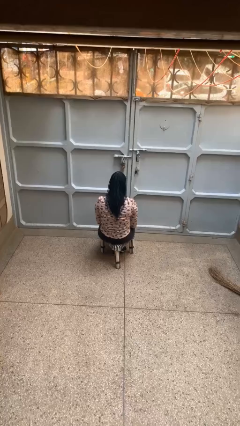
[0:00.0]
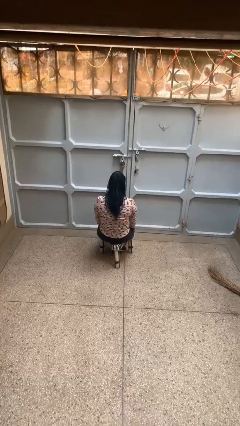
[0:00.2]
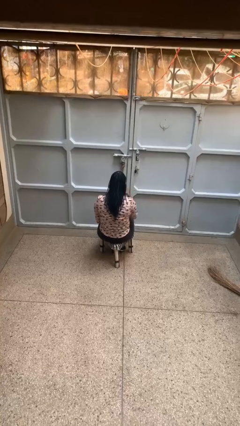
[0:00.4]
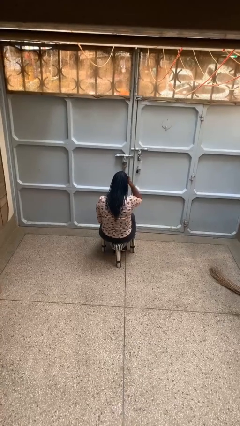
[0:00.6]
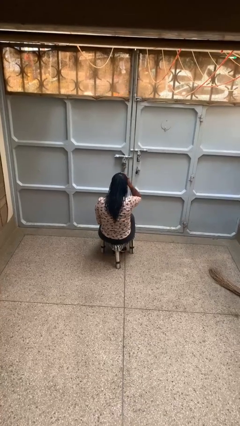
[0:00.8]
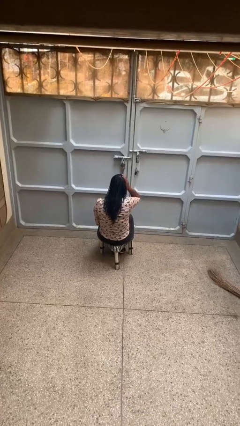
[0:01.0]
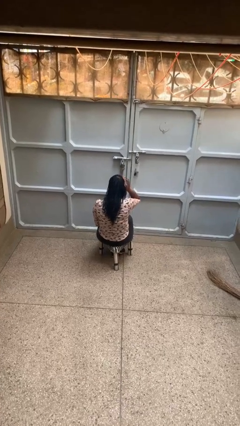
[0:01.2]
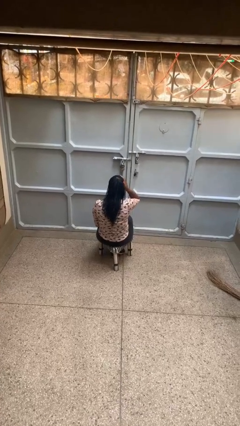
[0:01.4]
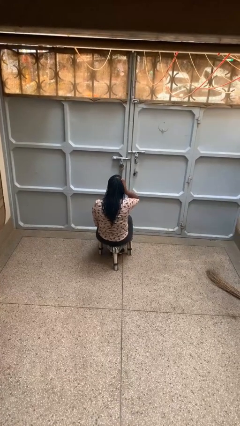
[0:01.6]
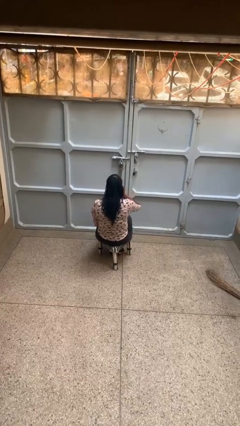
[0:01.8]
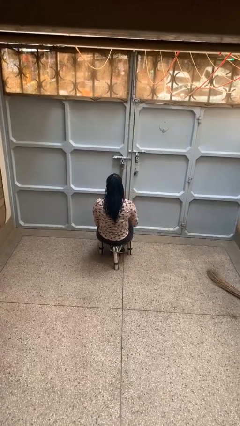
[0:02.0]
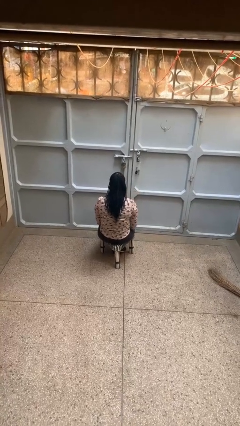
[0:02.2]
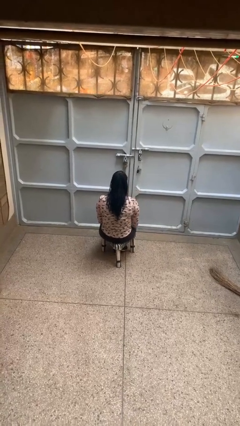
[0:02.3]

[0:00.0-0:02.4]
person strokes hair

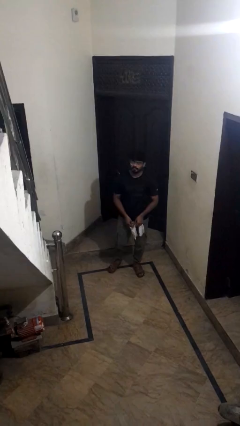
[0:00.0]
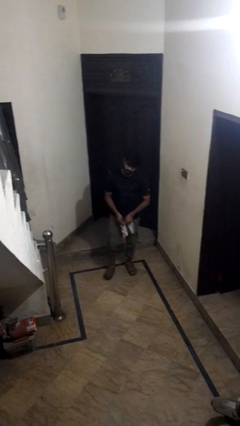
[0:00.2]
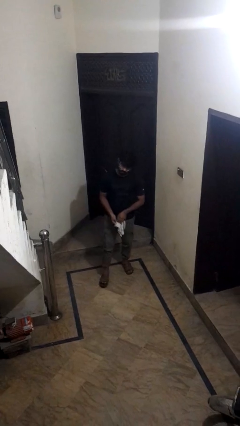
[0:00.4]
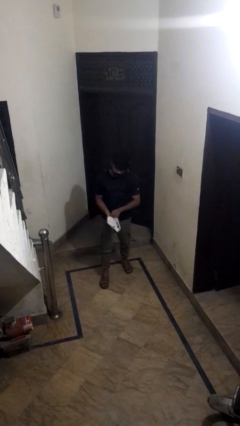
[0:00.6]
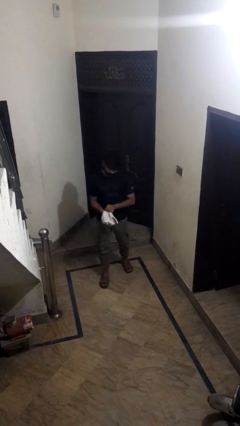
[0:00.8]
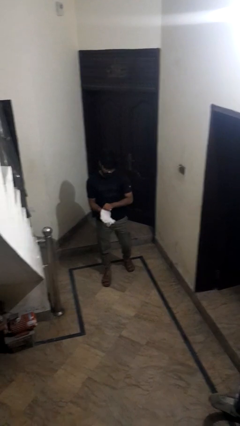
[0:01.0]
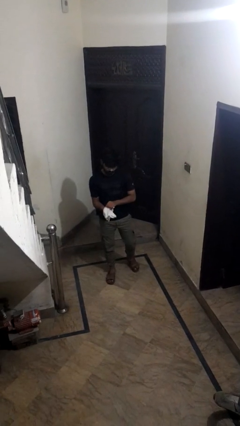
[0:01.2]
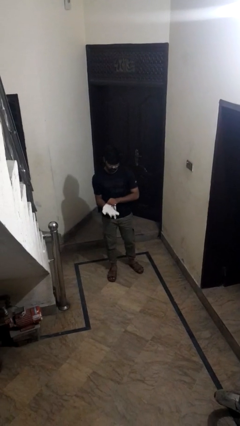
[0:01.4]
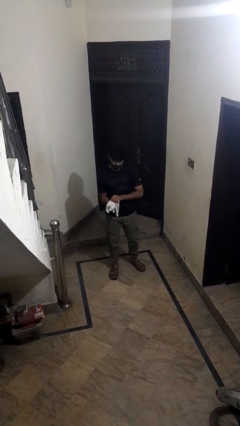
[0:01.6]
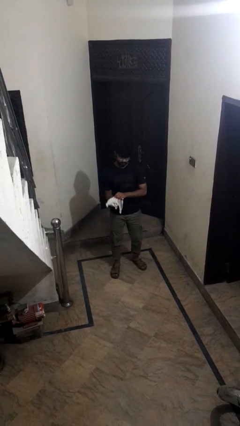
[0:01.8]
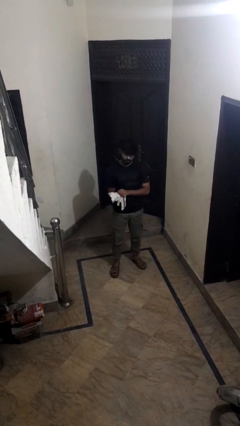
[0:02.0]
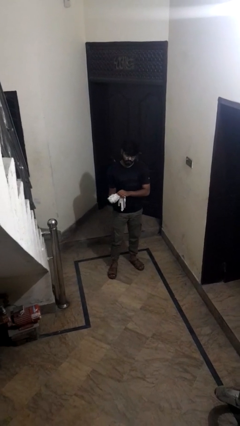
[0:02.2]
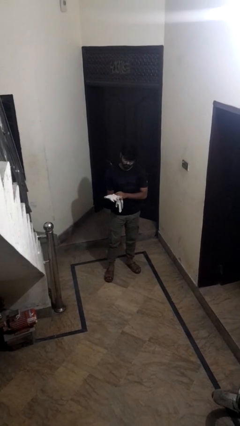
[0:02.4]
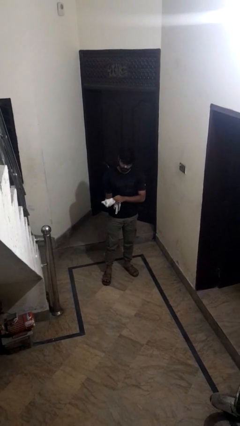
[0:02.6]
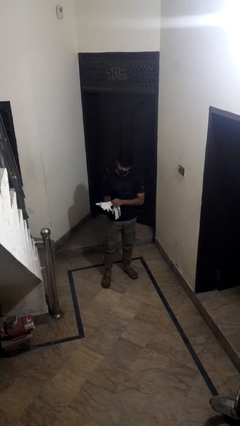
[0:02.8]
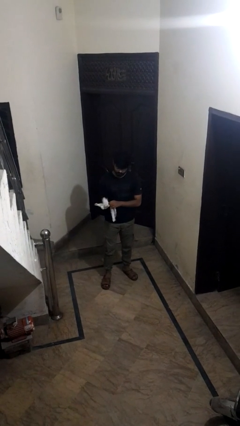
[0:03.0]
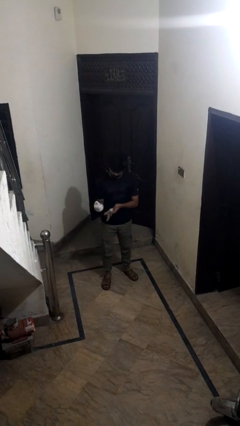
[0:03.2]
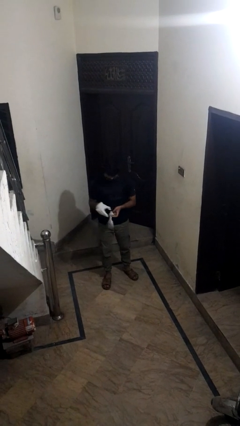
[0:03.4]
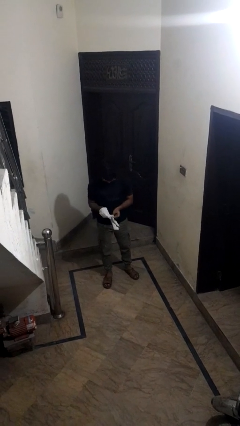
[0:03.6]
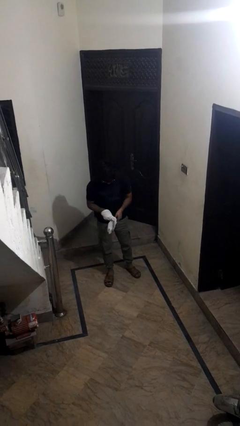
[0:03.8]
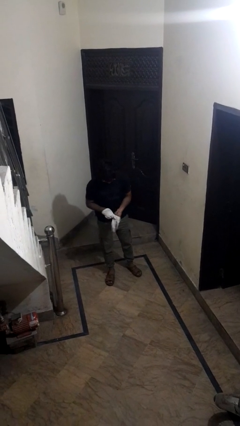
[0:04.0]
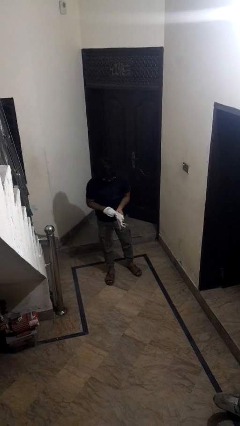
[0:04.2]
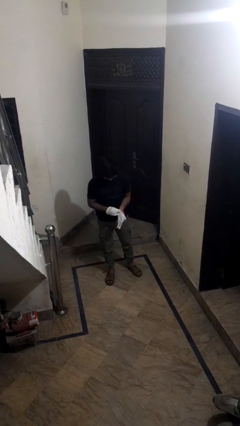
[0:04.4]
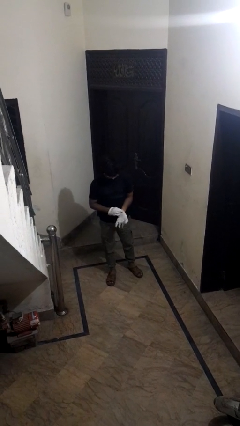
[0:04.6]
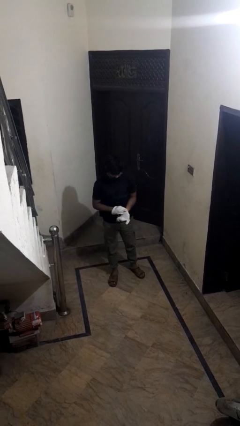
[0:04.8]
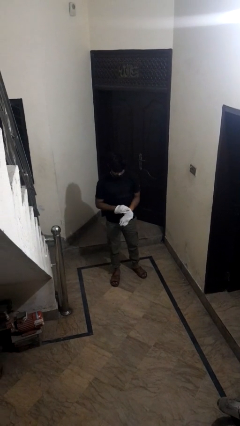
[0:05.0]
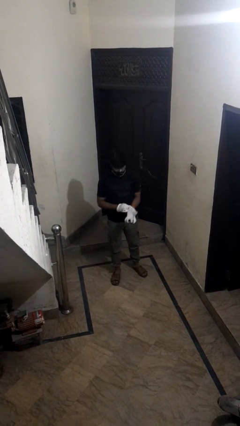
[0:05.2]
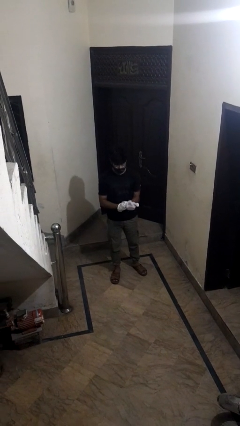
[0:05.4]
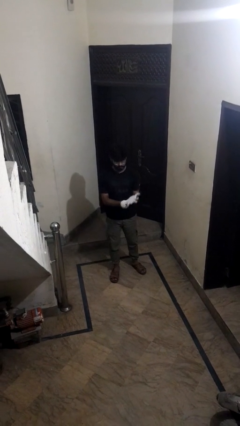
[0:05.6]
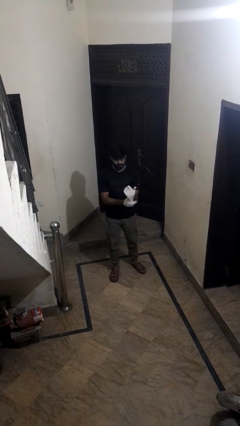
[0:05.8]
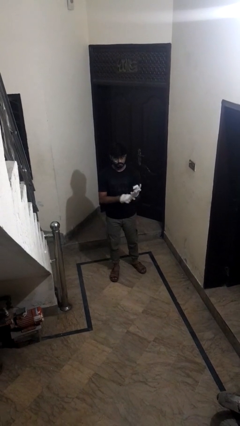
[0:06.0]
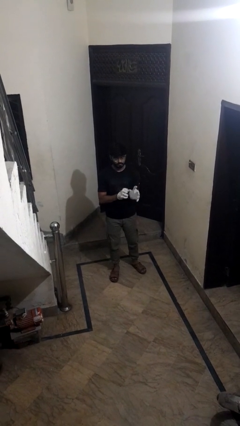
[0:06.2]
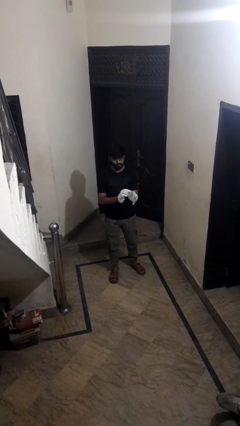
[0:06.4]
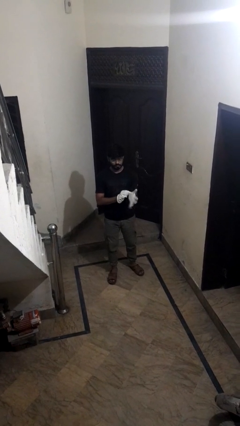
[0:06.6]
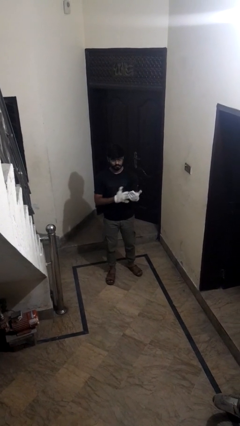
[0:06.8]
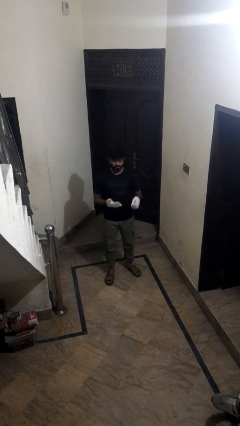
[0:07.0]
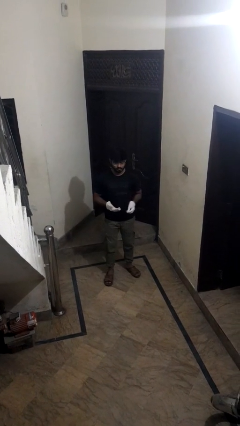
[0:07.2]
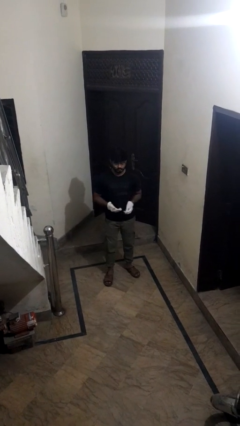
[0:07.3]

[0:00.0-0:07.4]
person puts on gloves

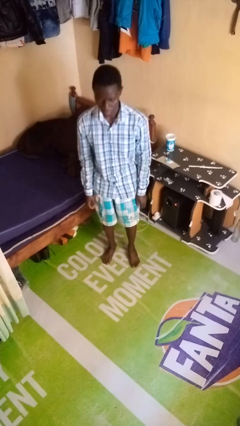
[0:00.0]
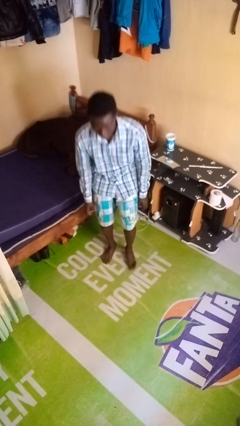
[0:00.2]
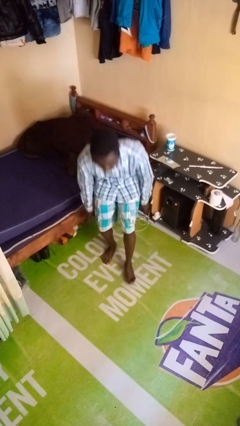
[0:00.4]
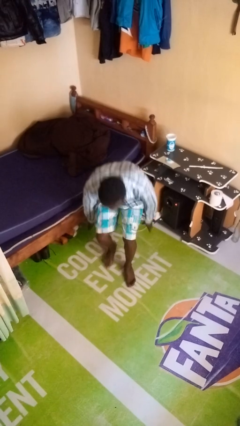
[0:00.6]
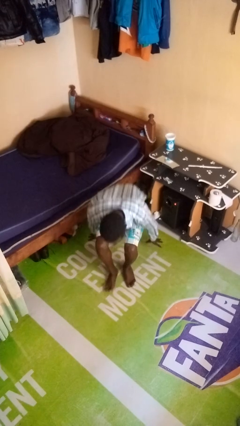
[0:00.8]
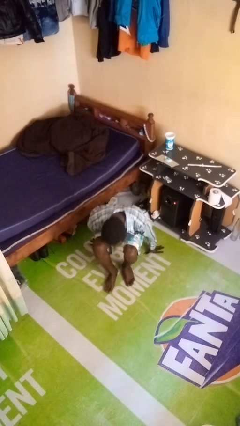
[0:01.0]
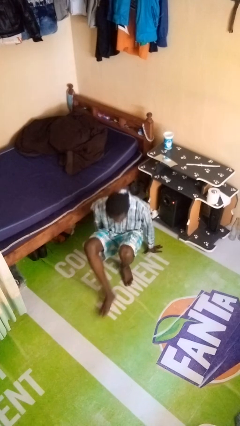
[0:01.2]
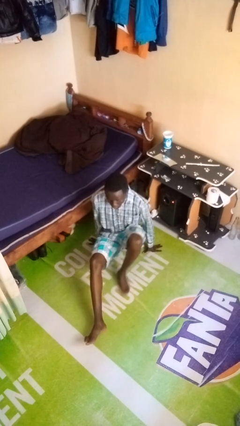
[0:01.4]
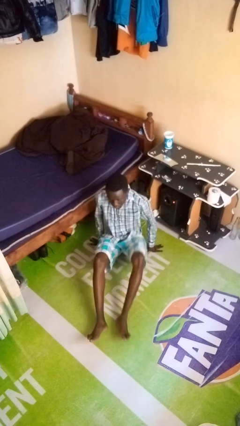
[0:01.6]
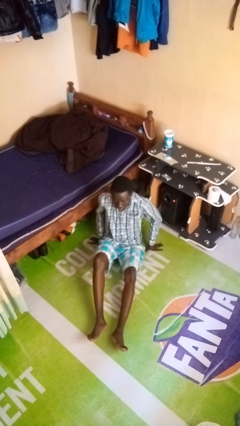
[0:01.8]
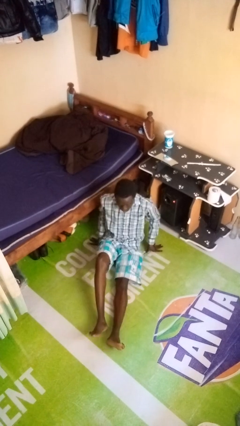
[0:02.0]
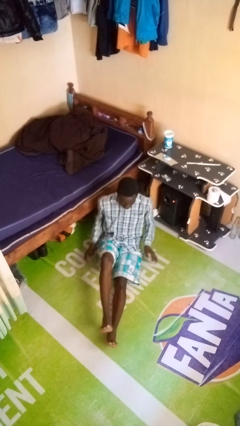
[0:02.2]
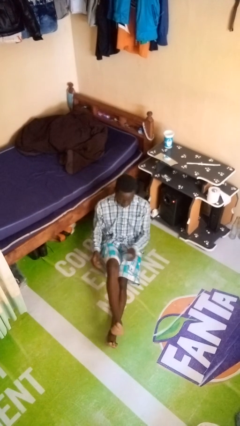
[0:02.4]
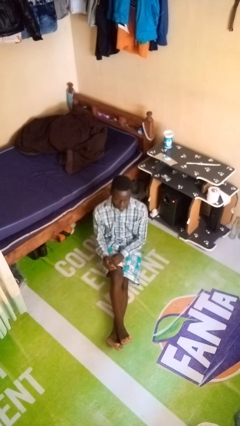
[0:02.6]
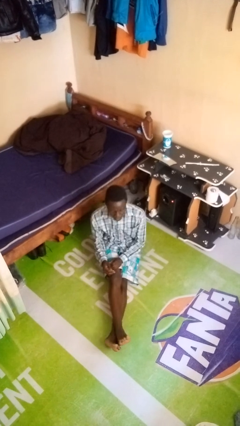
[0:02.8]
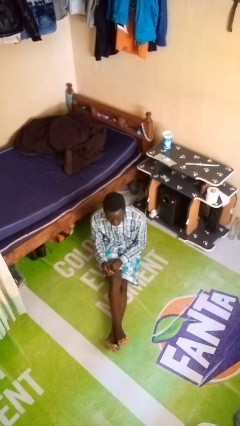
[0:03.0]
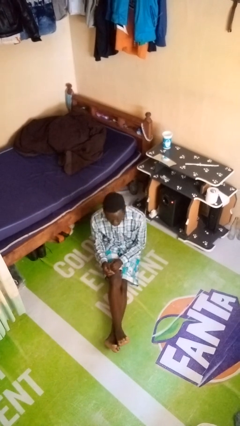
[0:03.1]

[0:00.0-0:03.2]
person sits crisscross

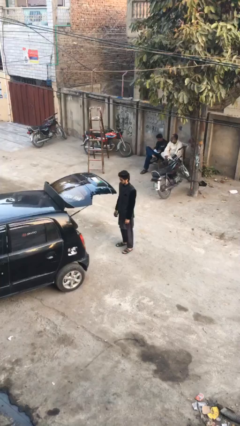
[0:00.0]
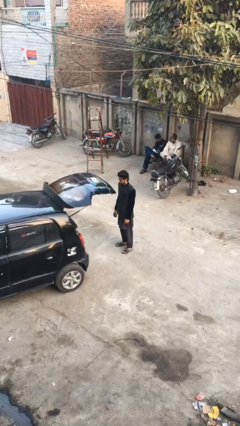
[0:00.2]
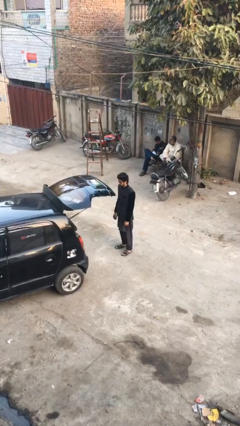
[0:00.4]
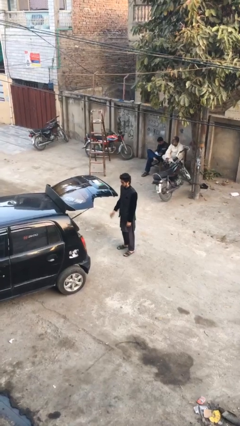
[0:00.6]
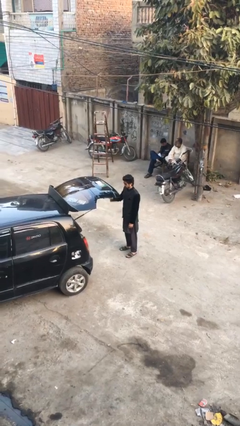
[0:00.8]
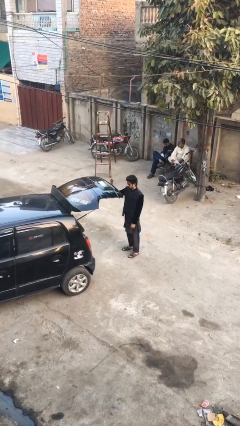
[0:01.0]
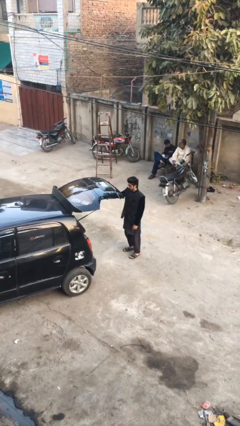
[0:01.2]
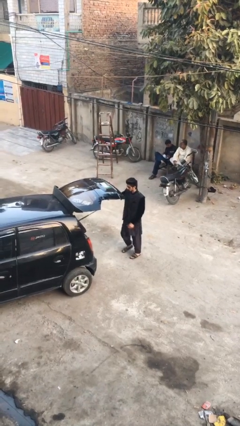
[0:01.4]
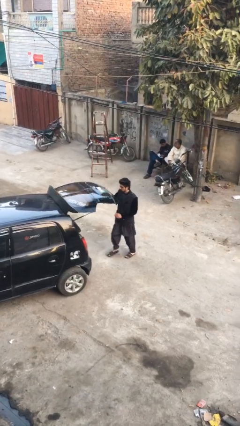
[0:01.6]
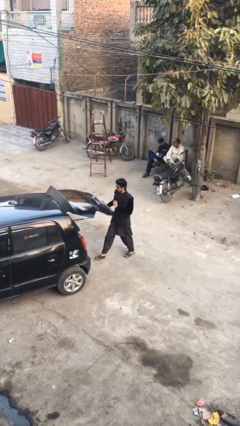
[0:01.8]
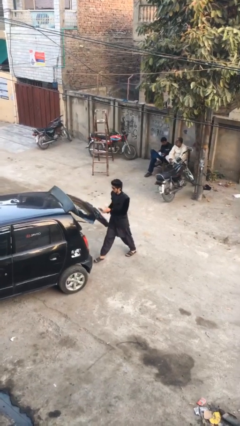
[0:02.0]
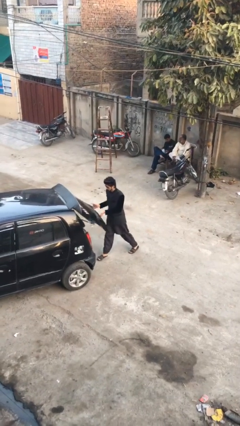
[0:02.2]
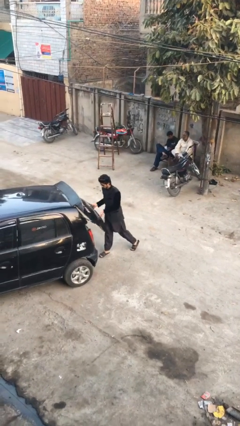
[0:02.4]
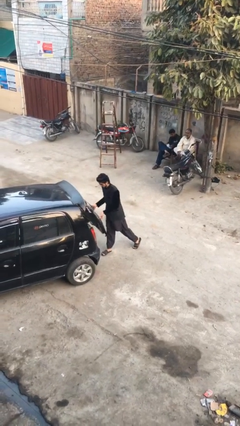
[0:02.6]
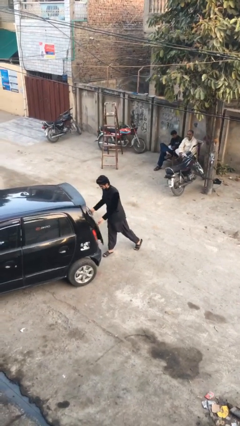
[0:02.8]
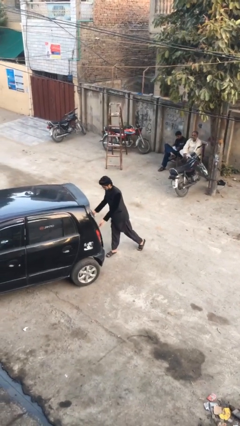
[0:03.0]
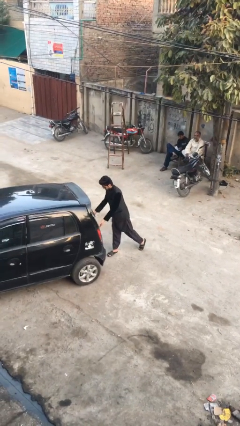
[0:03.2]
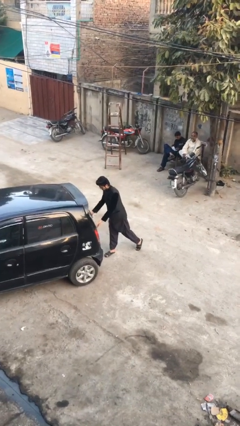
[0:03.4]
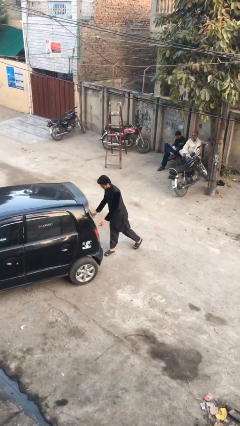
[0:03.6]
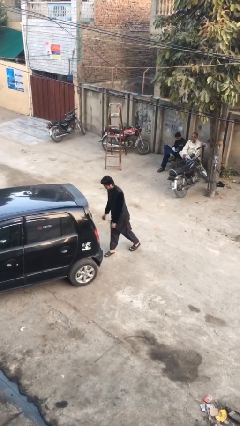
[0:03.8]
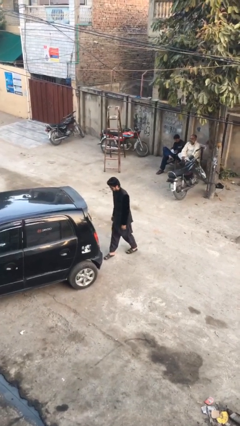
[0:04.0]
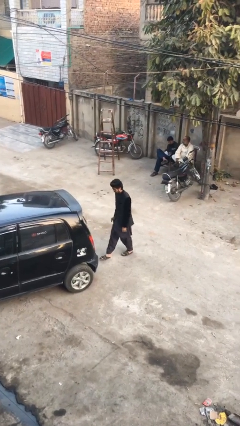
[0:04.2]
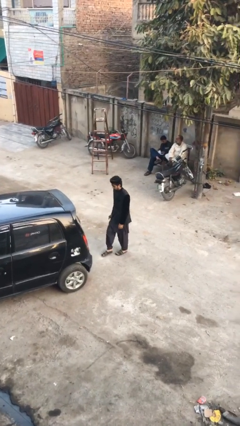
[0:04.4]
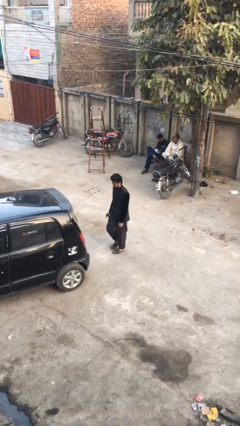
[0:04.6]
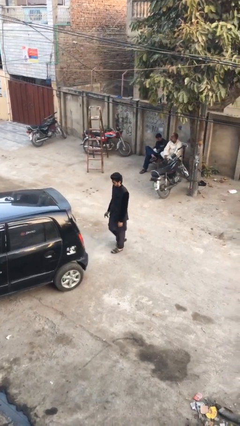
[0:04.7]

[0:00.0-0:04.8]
person closes car trunk
